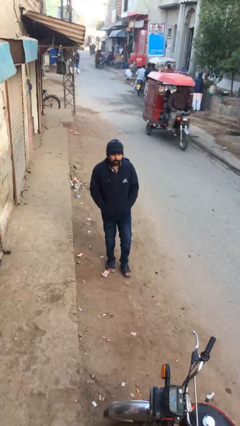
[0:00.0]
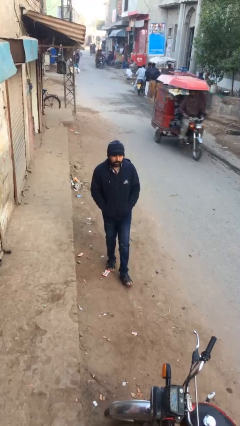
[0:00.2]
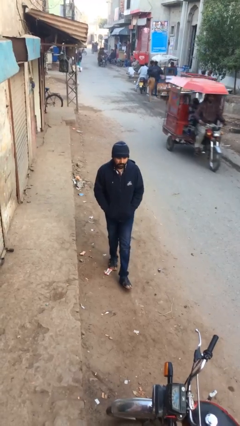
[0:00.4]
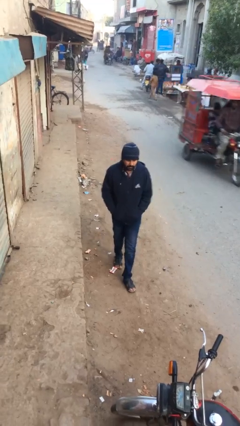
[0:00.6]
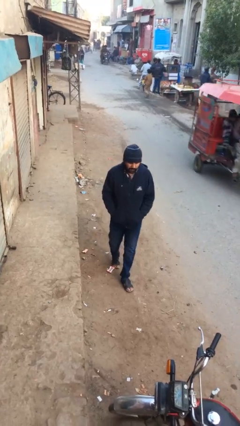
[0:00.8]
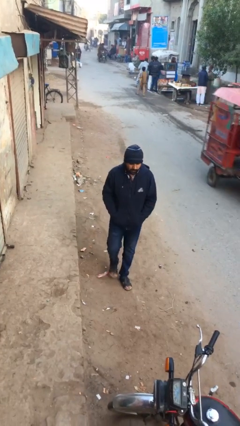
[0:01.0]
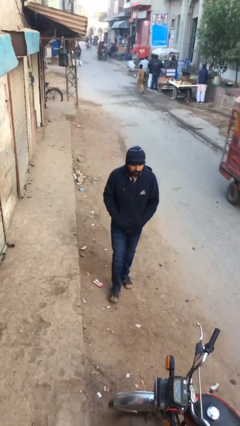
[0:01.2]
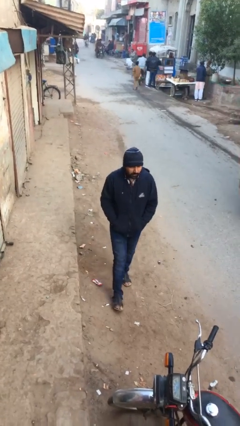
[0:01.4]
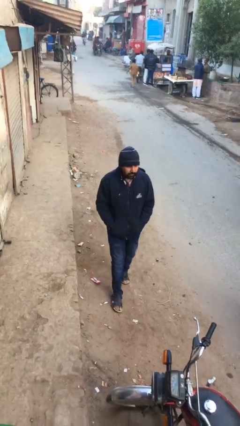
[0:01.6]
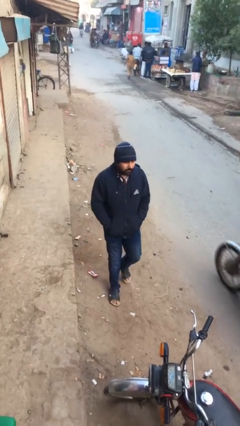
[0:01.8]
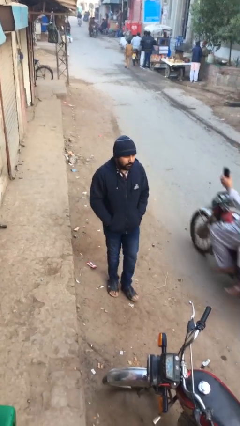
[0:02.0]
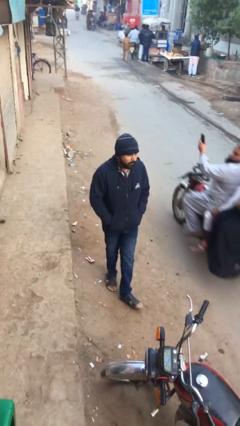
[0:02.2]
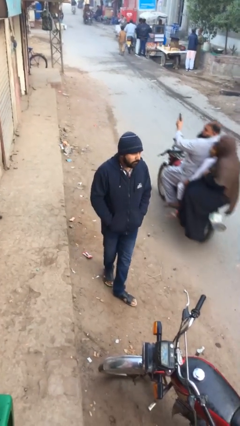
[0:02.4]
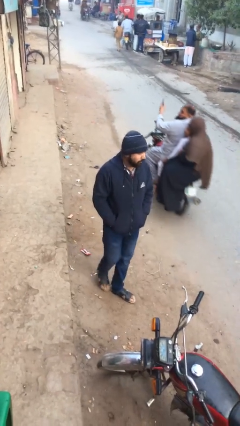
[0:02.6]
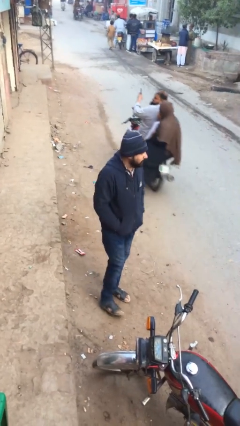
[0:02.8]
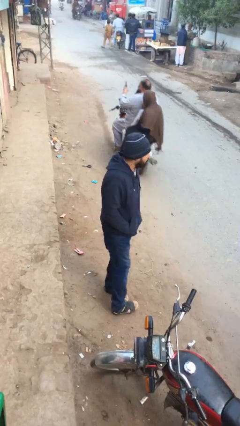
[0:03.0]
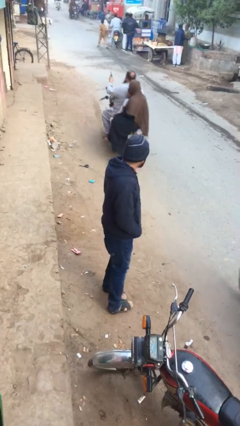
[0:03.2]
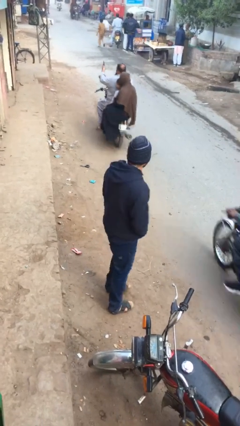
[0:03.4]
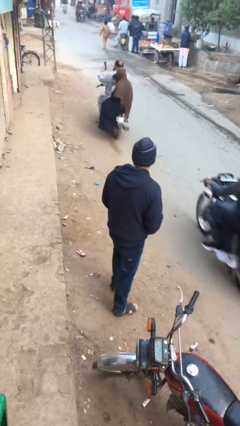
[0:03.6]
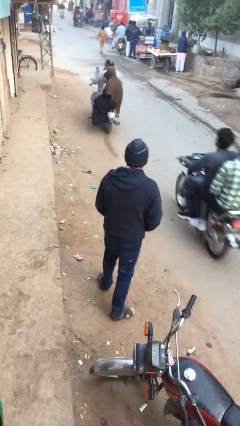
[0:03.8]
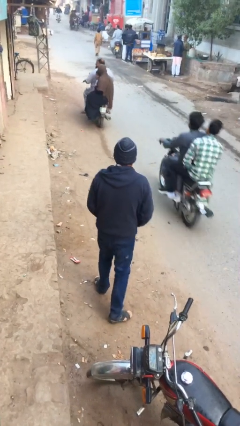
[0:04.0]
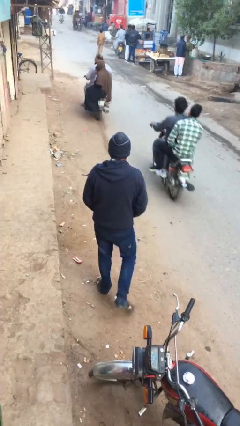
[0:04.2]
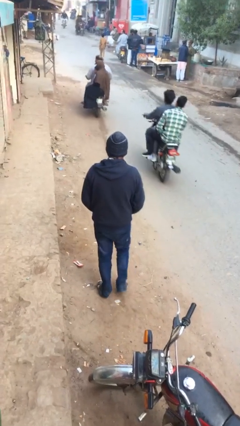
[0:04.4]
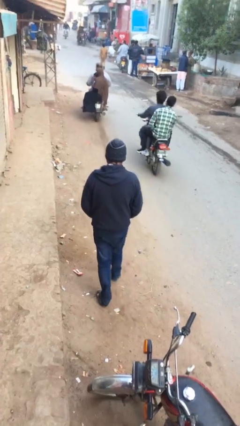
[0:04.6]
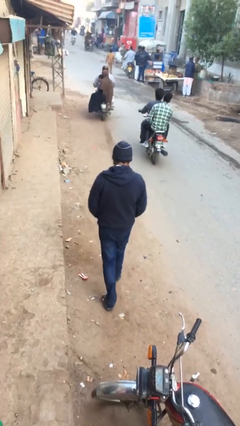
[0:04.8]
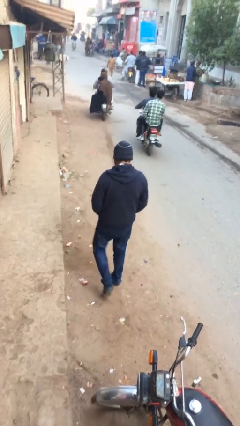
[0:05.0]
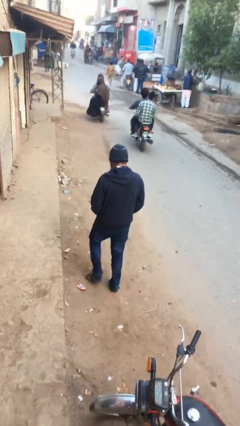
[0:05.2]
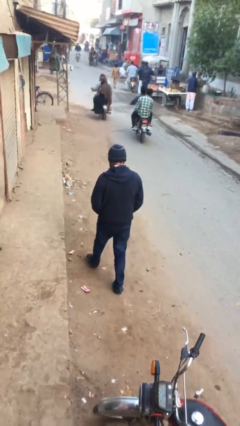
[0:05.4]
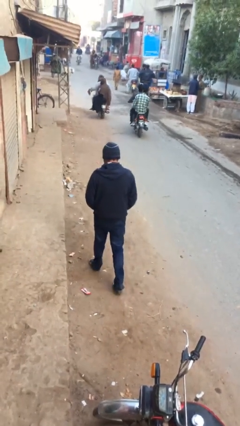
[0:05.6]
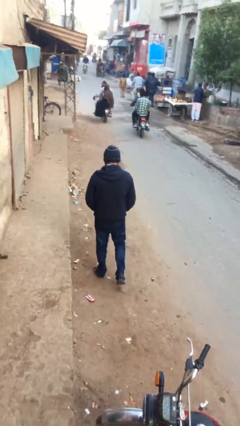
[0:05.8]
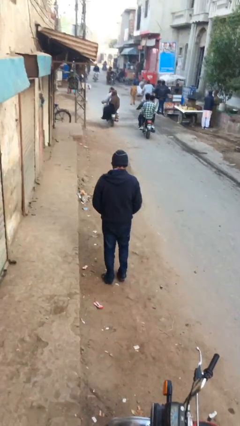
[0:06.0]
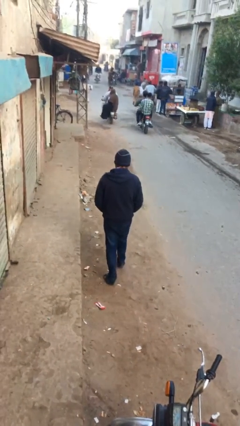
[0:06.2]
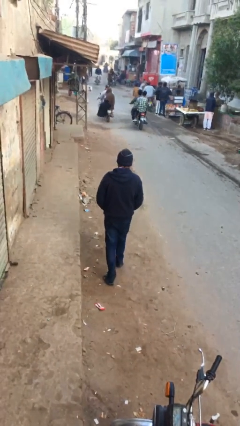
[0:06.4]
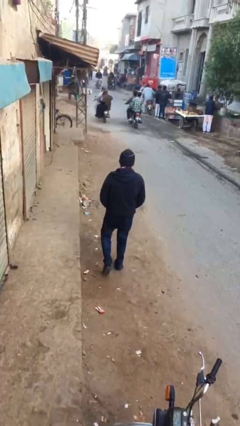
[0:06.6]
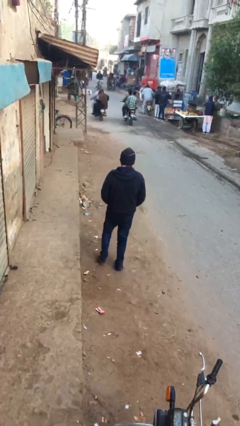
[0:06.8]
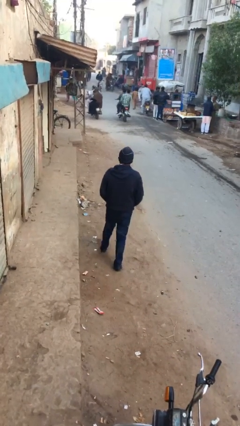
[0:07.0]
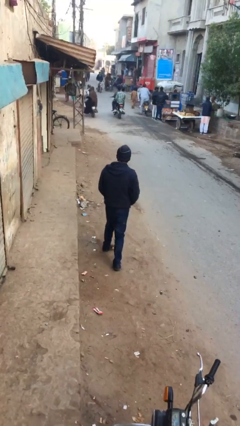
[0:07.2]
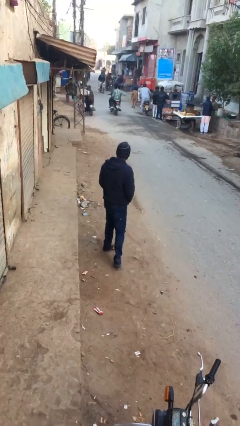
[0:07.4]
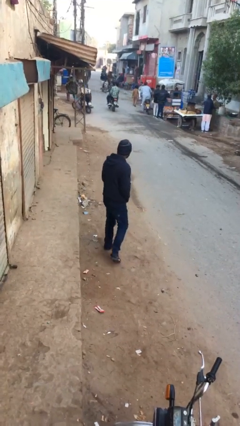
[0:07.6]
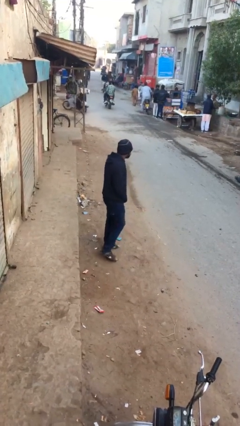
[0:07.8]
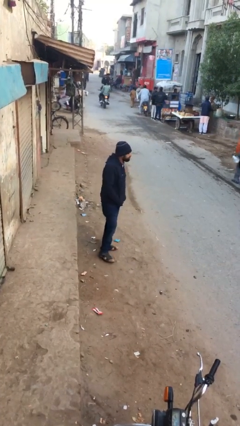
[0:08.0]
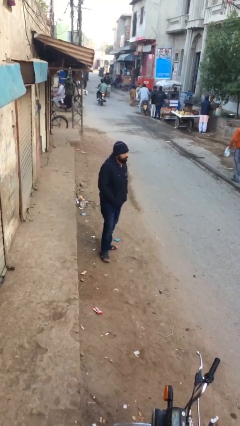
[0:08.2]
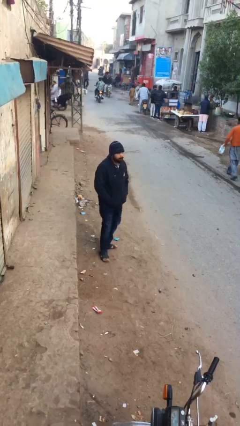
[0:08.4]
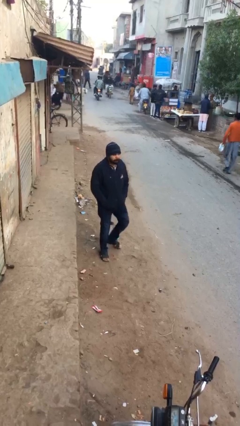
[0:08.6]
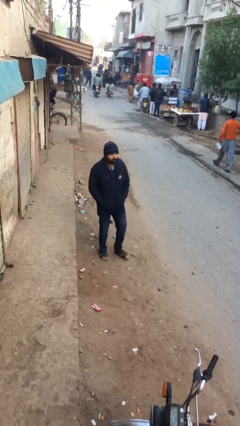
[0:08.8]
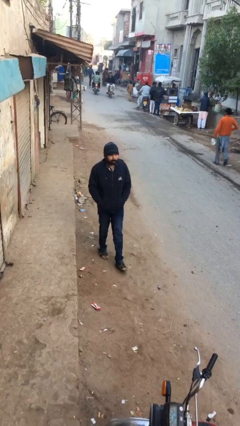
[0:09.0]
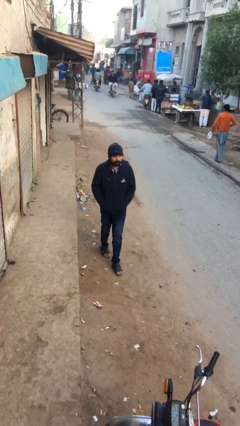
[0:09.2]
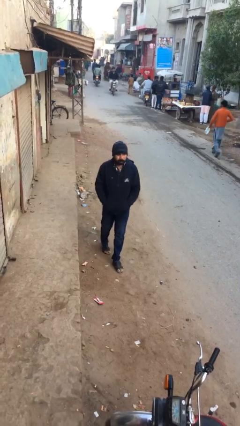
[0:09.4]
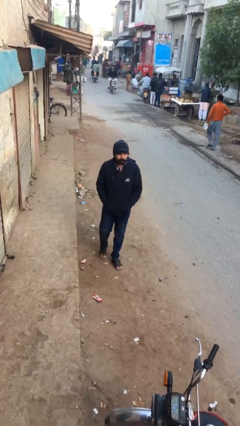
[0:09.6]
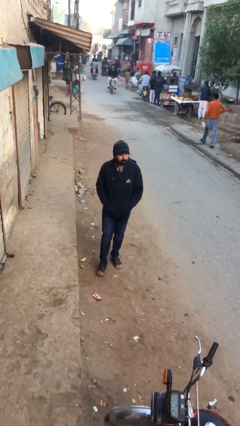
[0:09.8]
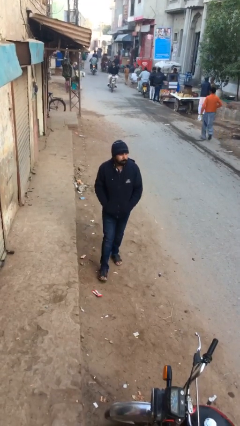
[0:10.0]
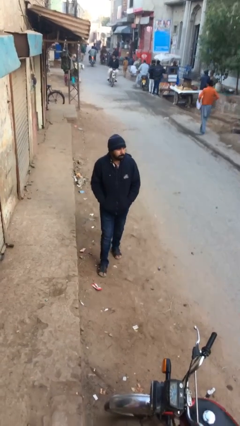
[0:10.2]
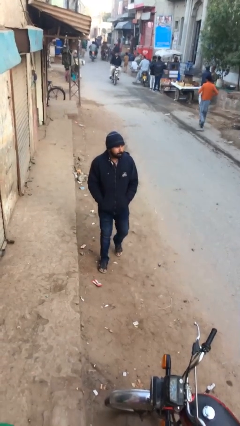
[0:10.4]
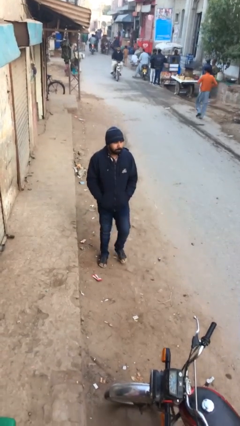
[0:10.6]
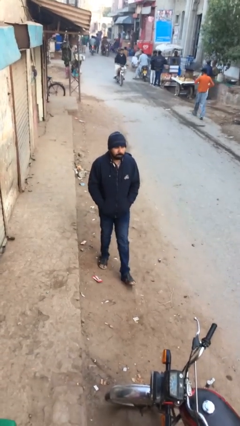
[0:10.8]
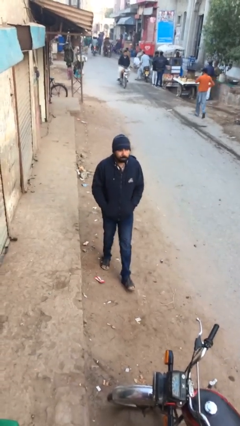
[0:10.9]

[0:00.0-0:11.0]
person walks

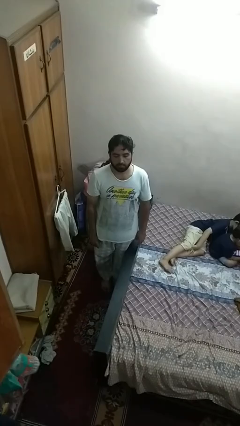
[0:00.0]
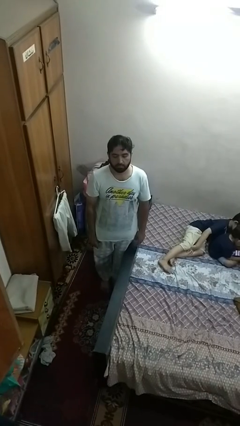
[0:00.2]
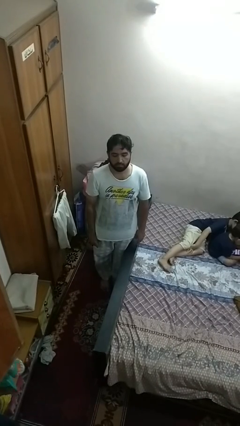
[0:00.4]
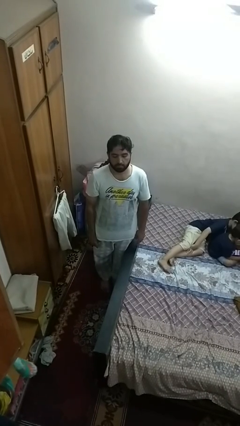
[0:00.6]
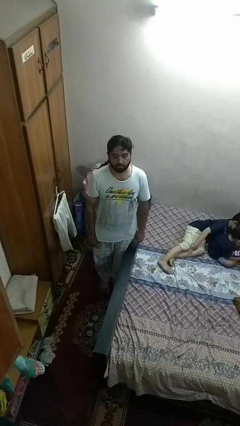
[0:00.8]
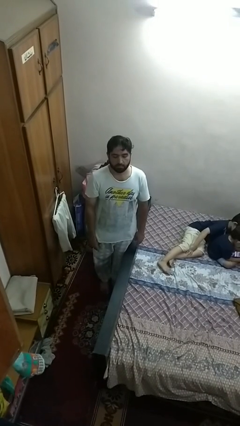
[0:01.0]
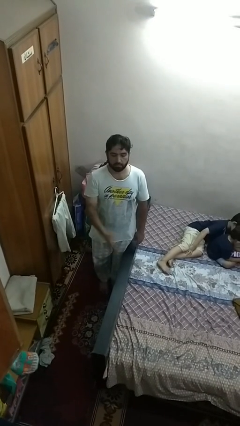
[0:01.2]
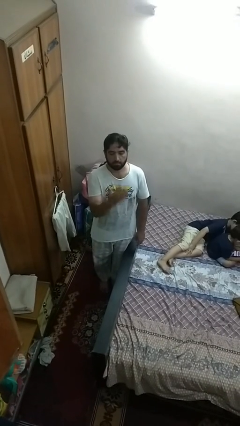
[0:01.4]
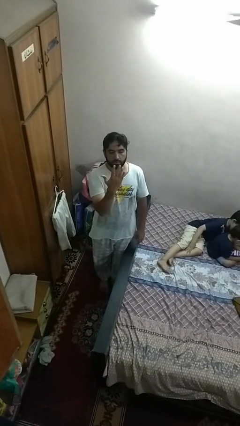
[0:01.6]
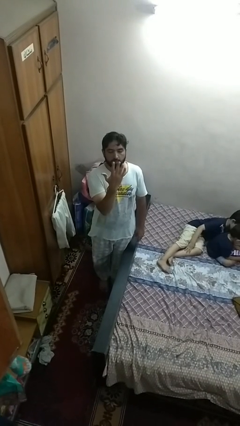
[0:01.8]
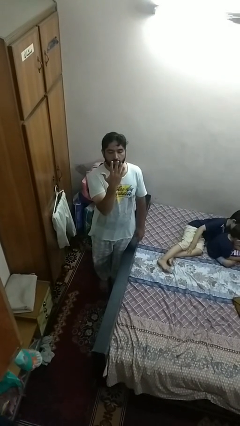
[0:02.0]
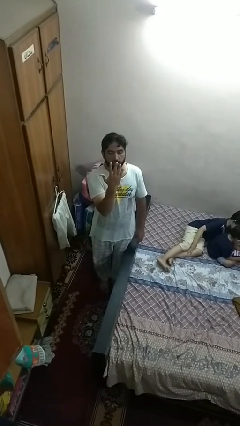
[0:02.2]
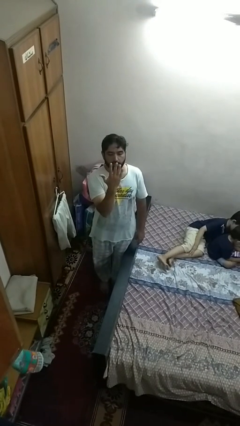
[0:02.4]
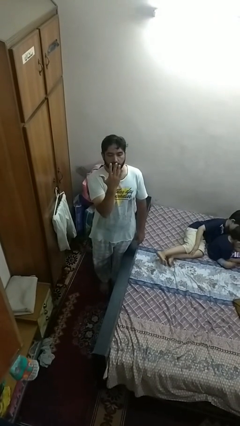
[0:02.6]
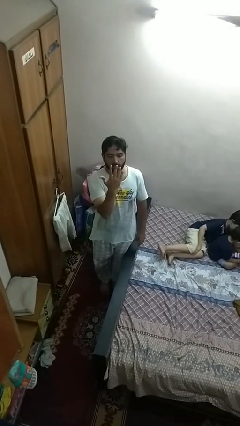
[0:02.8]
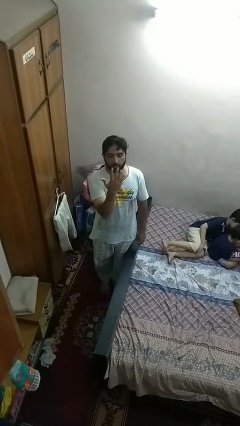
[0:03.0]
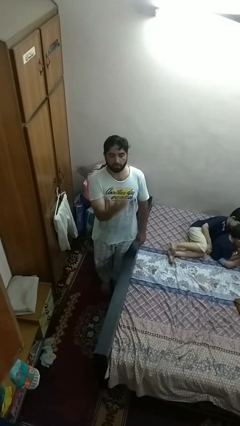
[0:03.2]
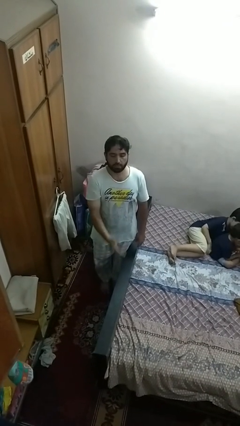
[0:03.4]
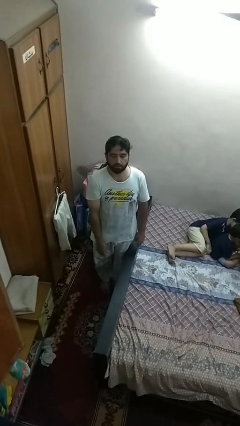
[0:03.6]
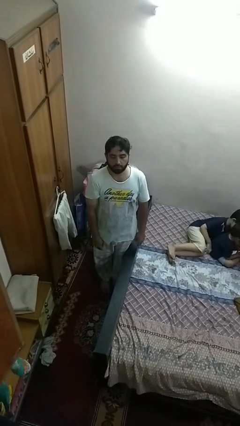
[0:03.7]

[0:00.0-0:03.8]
person gestures number five

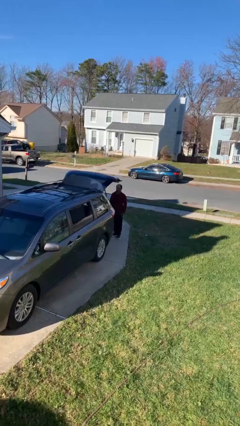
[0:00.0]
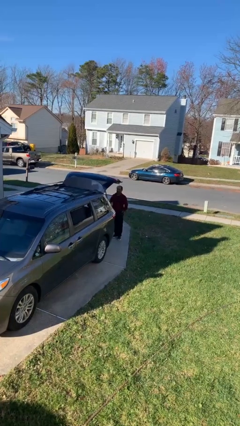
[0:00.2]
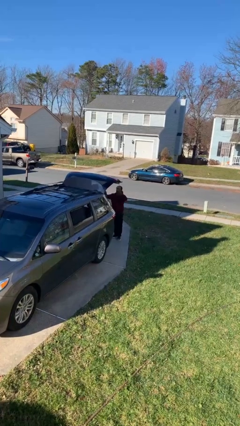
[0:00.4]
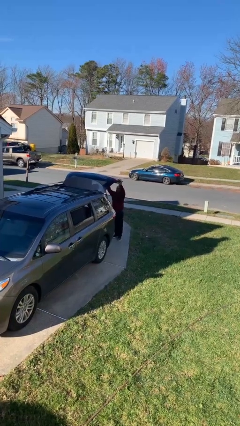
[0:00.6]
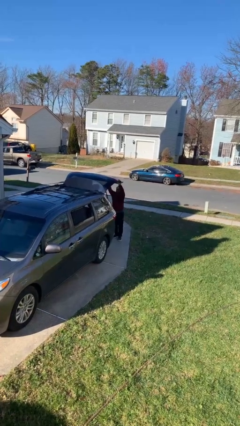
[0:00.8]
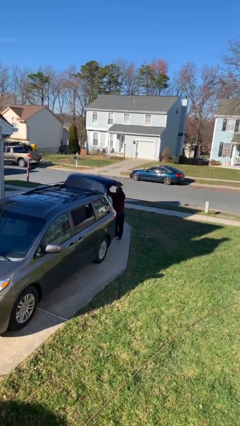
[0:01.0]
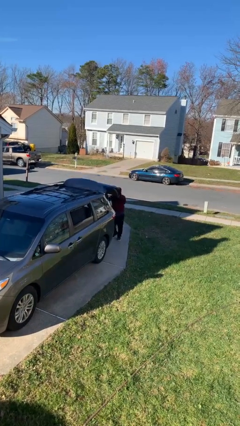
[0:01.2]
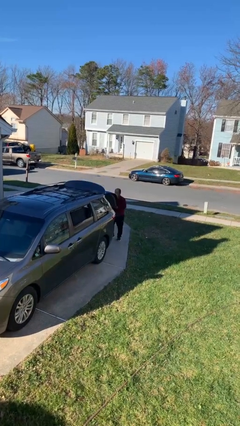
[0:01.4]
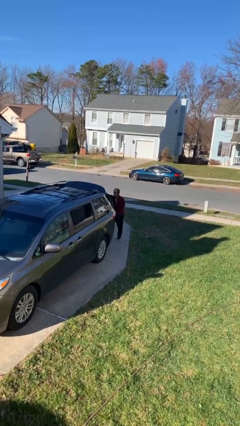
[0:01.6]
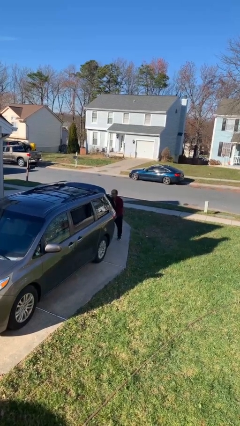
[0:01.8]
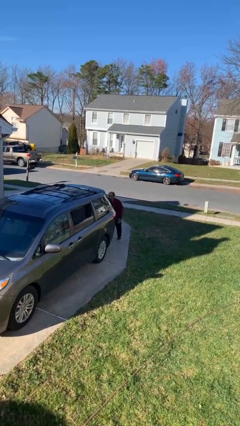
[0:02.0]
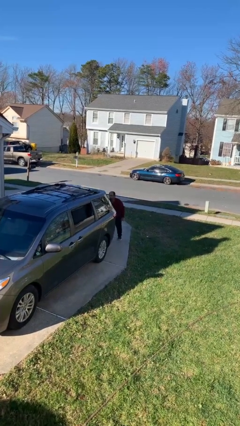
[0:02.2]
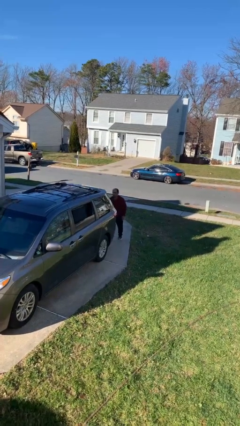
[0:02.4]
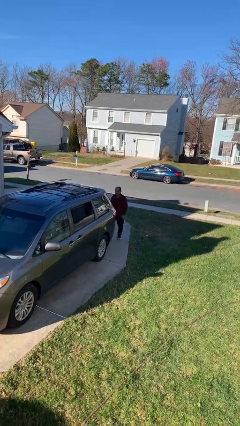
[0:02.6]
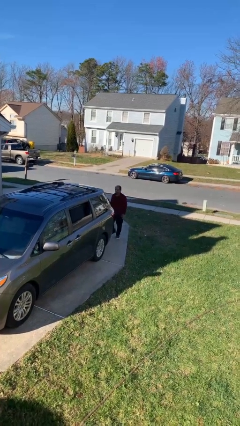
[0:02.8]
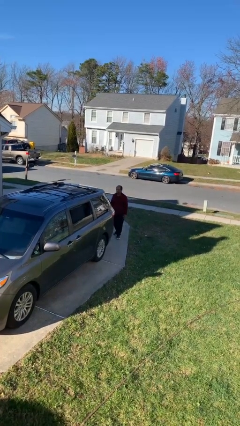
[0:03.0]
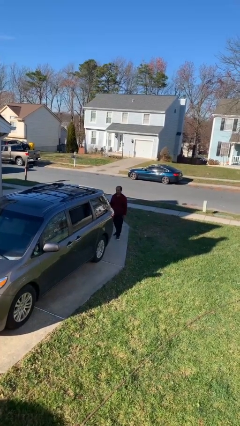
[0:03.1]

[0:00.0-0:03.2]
person closes car trunk

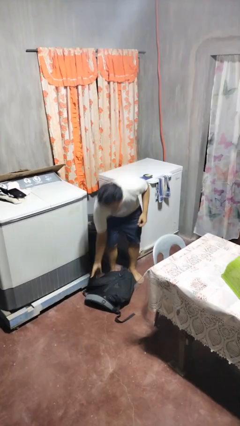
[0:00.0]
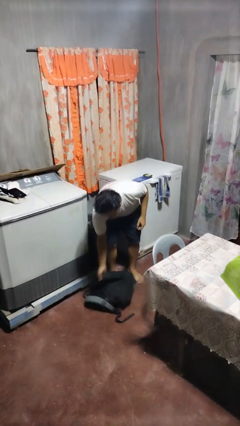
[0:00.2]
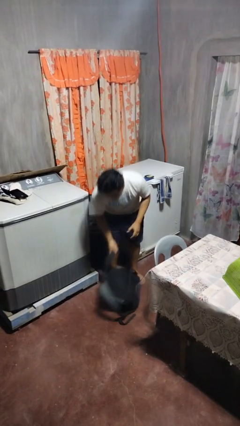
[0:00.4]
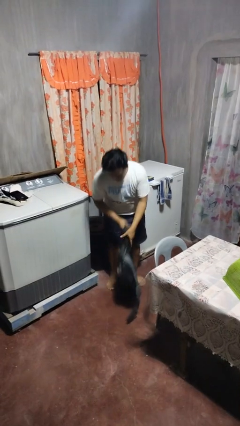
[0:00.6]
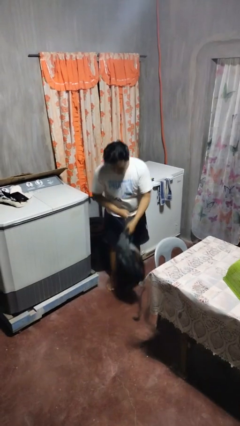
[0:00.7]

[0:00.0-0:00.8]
person picks up object from floor
